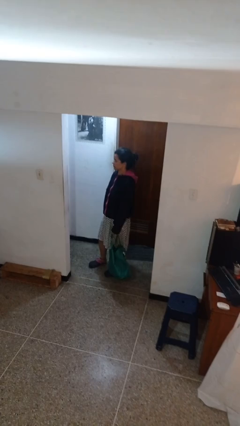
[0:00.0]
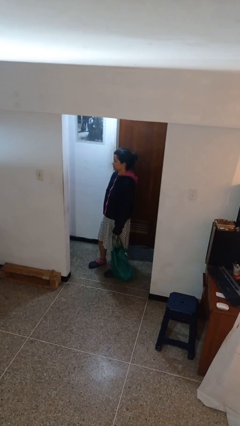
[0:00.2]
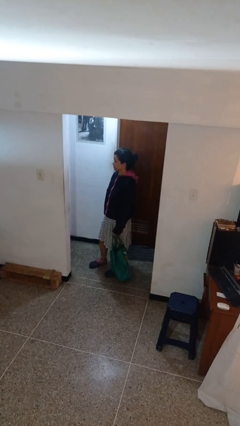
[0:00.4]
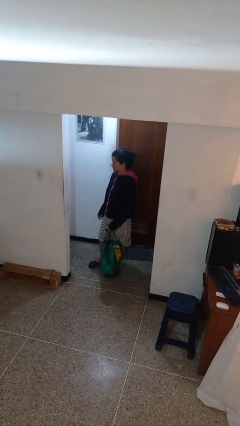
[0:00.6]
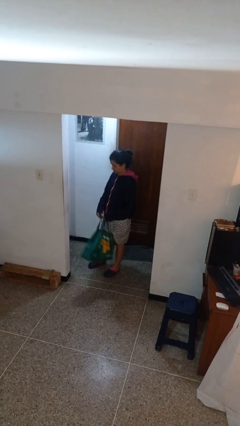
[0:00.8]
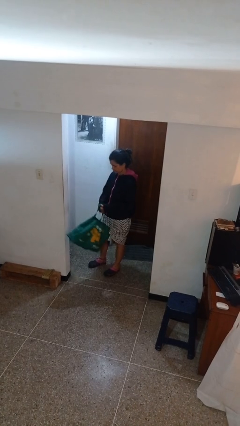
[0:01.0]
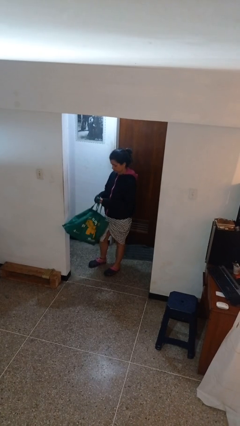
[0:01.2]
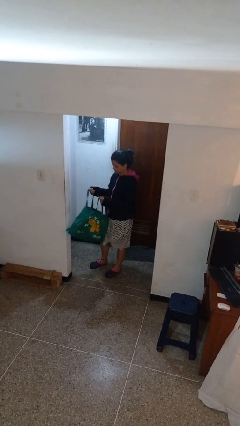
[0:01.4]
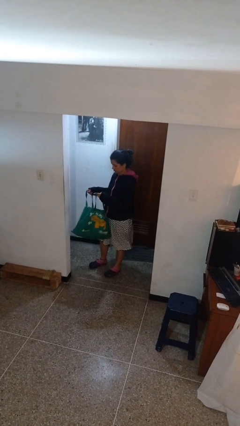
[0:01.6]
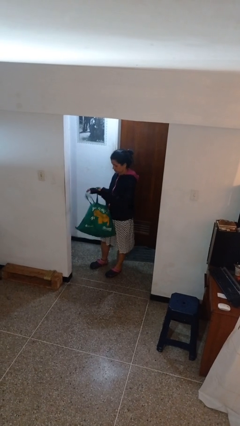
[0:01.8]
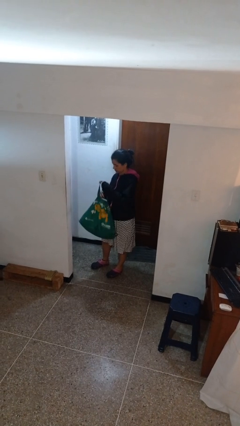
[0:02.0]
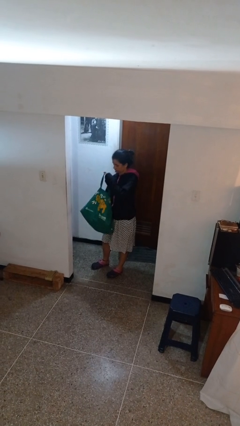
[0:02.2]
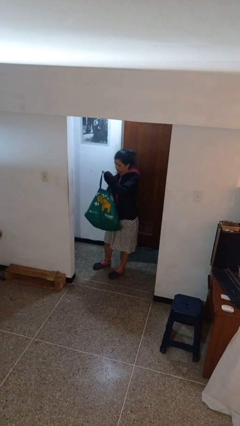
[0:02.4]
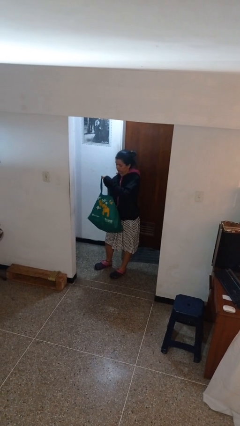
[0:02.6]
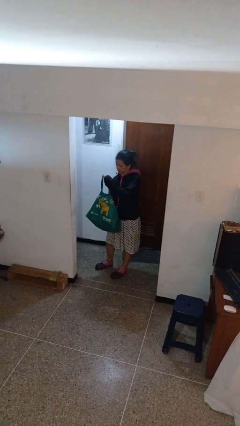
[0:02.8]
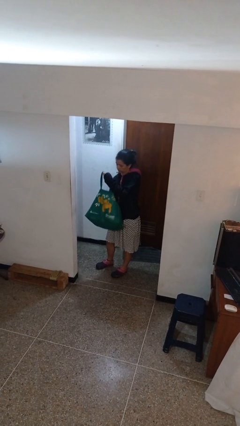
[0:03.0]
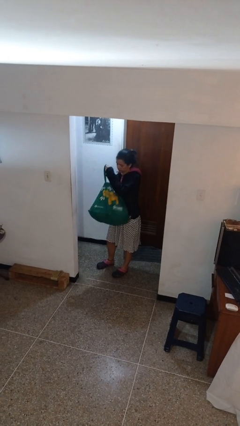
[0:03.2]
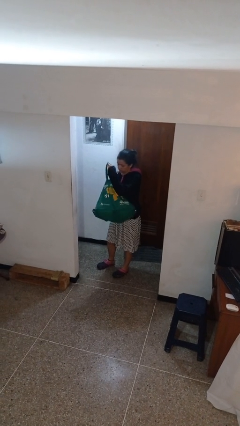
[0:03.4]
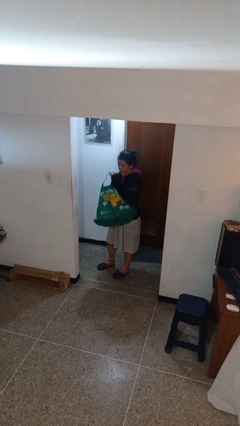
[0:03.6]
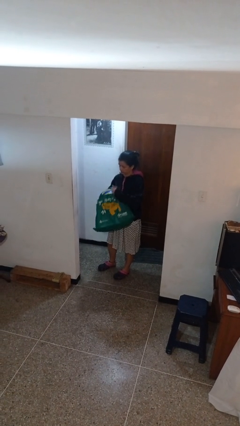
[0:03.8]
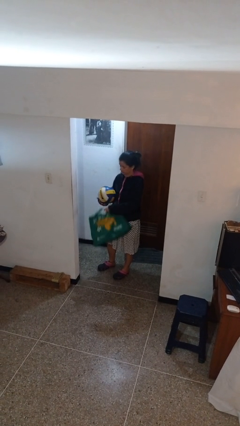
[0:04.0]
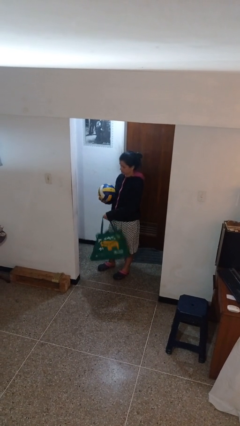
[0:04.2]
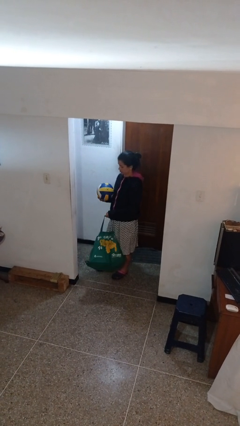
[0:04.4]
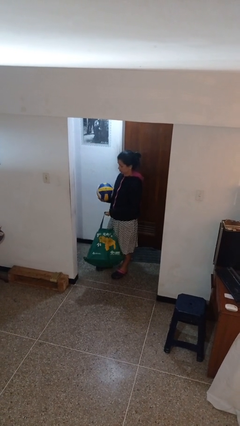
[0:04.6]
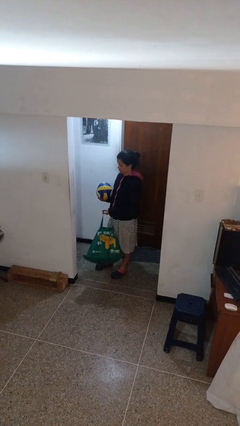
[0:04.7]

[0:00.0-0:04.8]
person takes object from bag

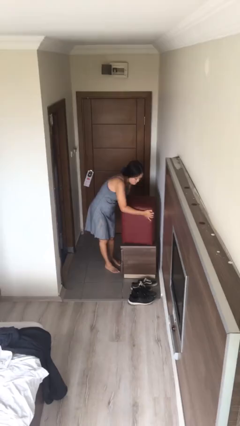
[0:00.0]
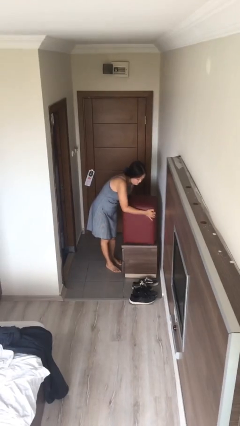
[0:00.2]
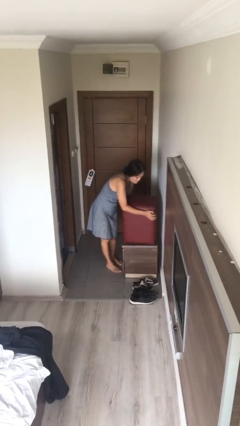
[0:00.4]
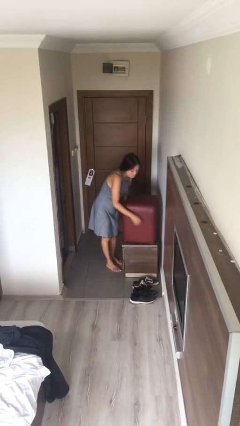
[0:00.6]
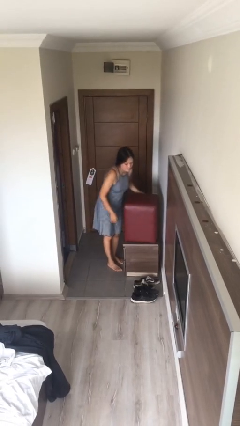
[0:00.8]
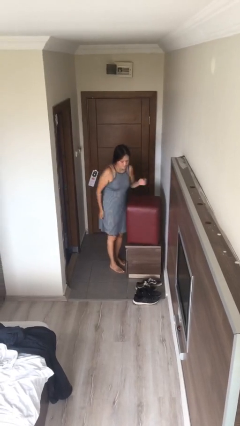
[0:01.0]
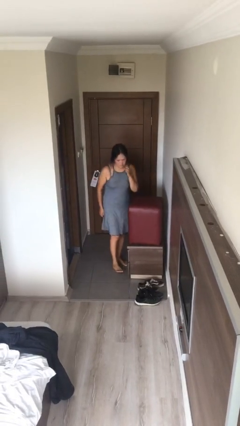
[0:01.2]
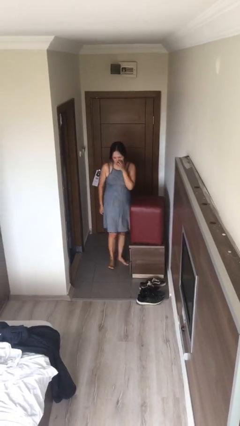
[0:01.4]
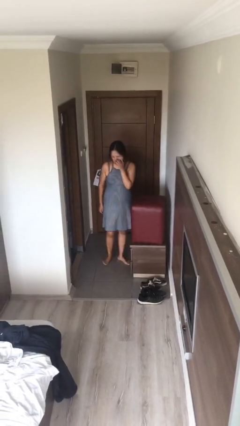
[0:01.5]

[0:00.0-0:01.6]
person puts down object on floor

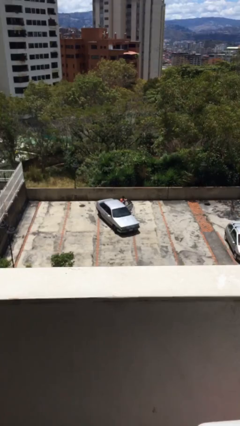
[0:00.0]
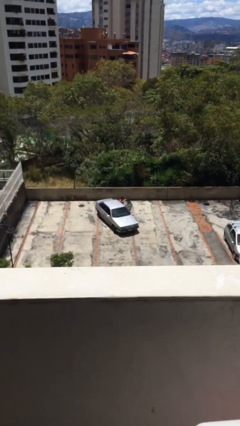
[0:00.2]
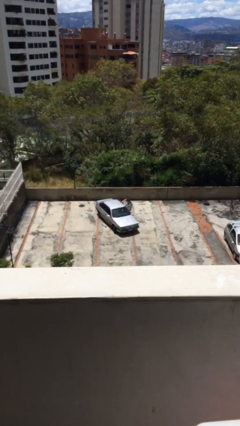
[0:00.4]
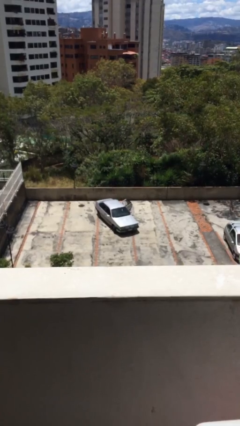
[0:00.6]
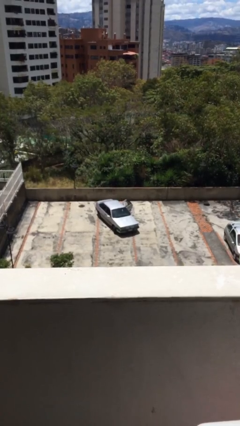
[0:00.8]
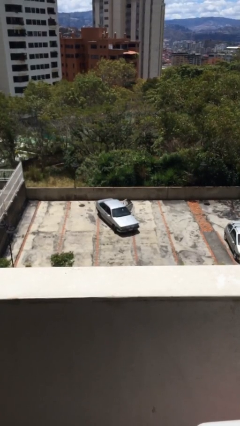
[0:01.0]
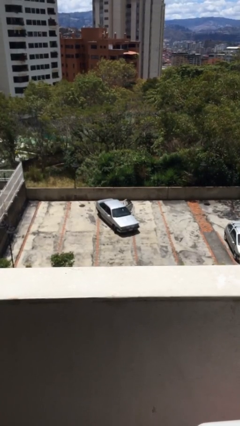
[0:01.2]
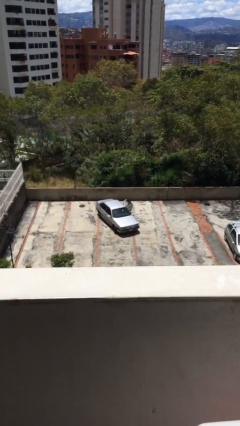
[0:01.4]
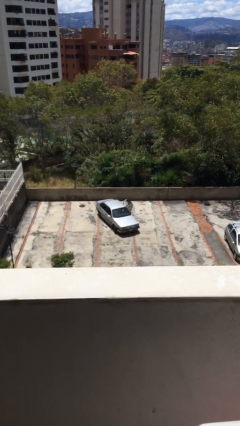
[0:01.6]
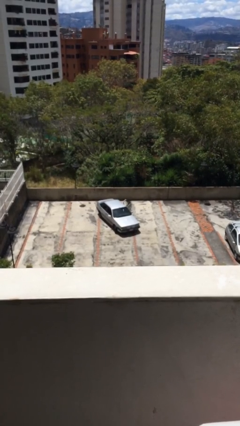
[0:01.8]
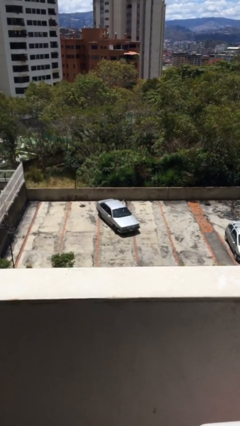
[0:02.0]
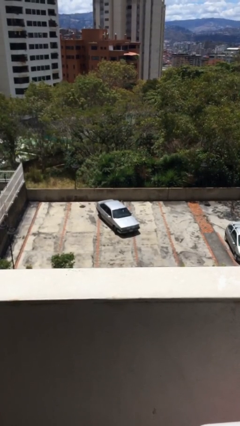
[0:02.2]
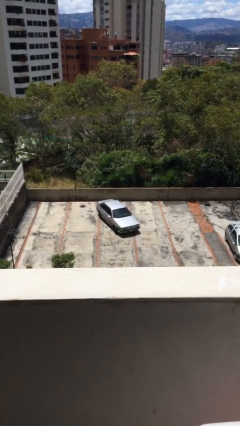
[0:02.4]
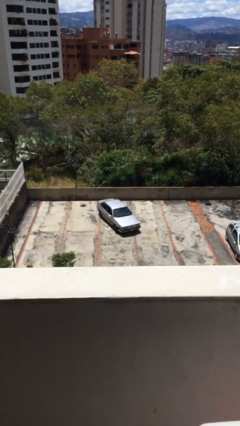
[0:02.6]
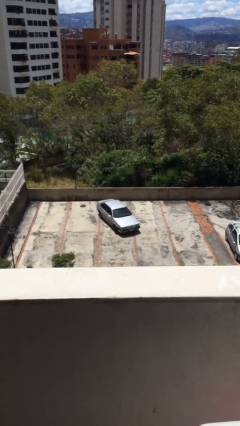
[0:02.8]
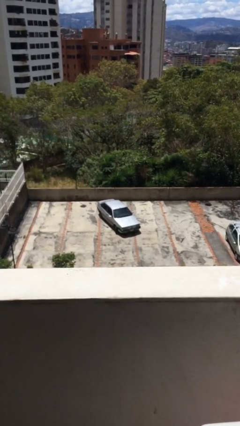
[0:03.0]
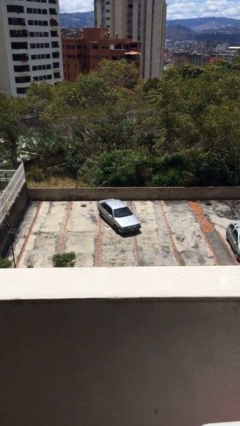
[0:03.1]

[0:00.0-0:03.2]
car picks up person

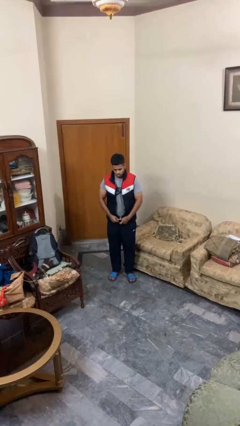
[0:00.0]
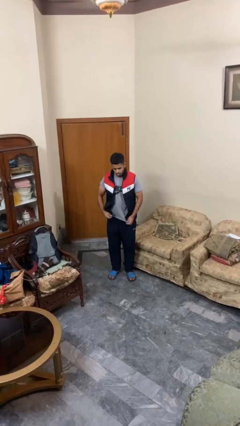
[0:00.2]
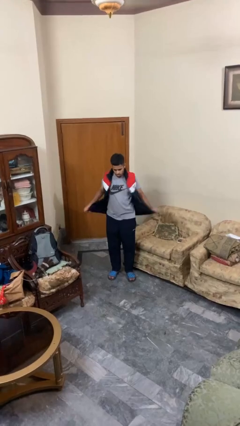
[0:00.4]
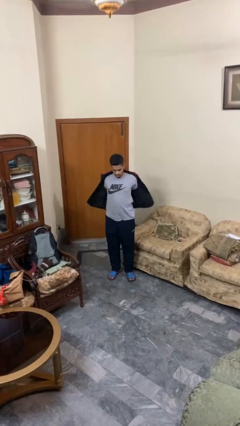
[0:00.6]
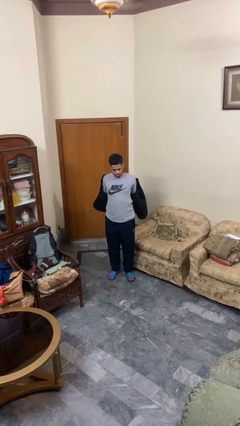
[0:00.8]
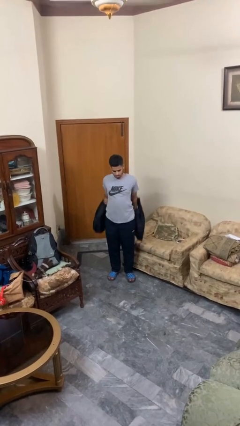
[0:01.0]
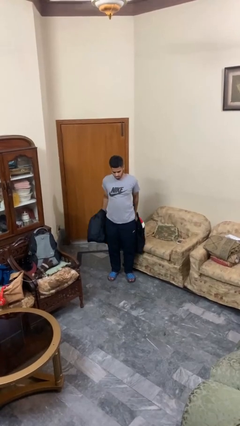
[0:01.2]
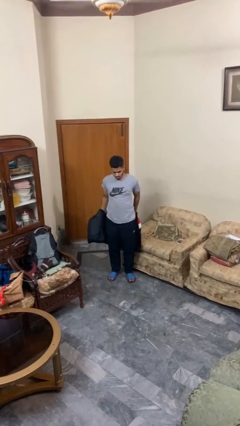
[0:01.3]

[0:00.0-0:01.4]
person takes off jacket

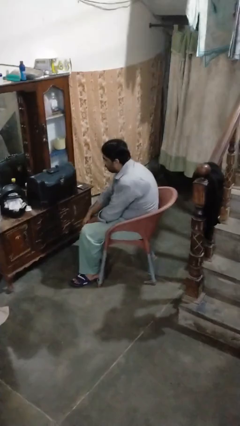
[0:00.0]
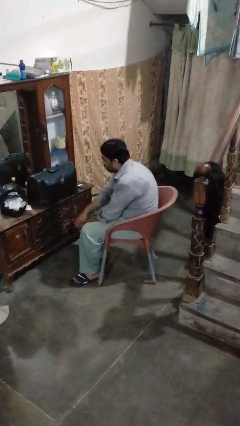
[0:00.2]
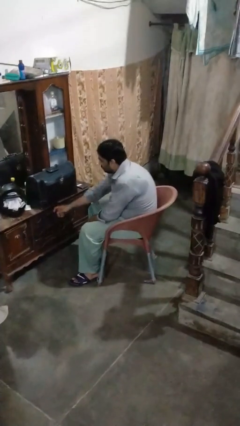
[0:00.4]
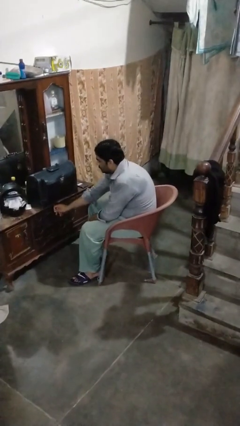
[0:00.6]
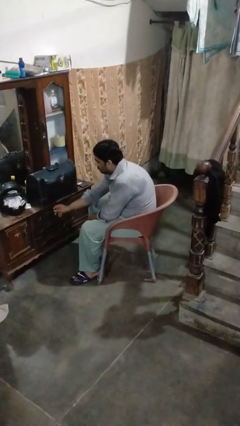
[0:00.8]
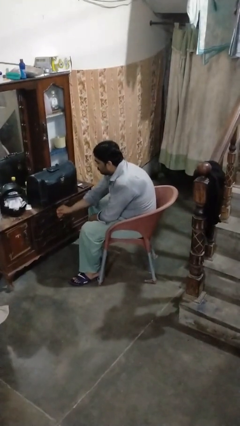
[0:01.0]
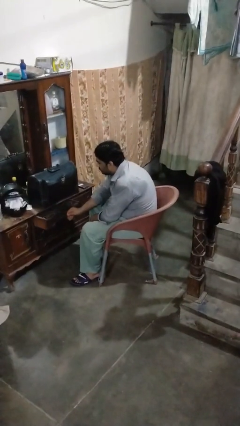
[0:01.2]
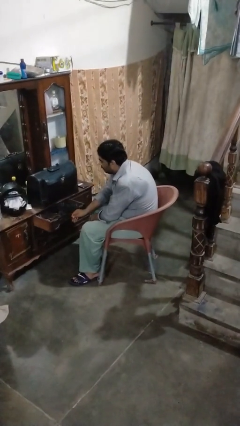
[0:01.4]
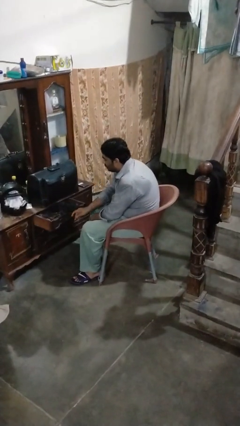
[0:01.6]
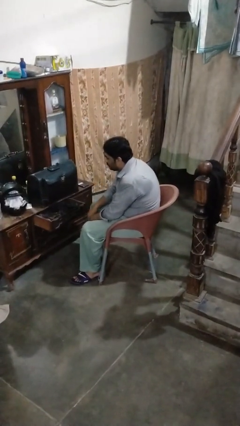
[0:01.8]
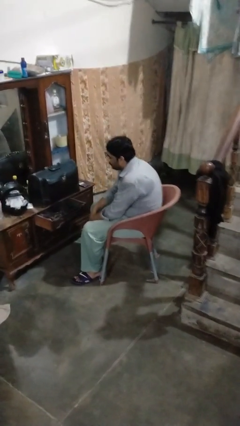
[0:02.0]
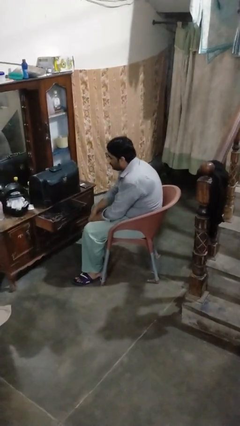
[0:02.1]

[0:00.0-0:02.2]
person opens dresser drawer

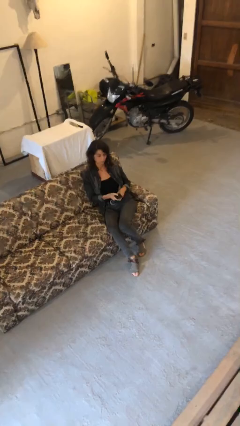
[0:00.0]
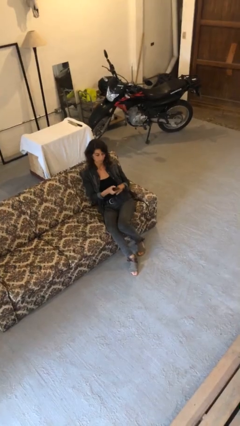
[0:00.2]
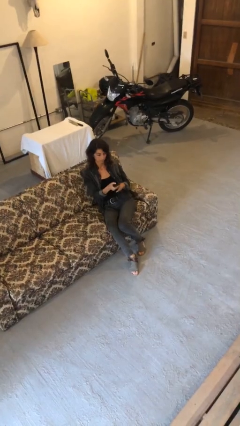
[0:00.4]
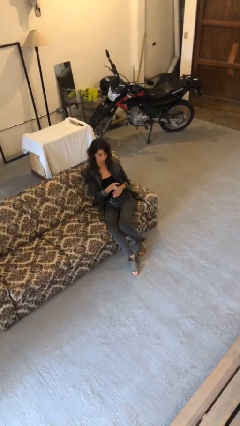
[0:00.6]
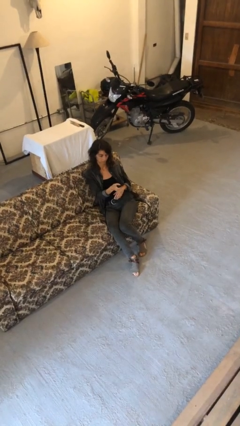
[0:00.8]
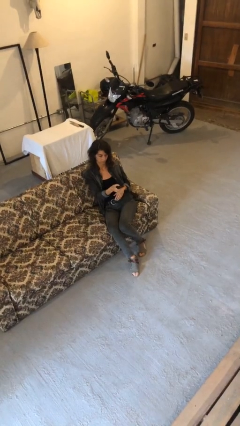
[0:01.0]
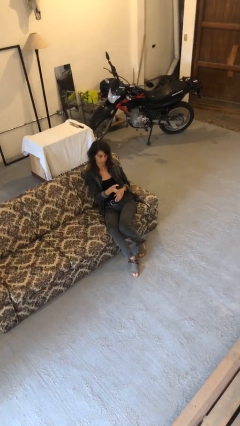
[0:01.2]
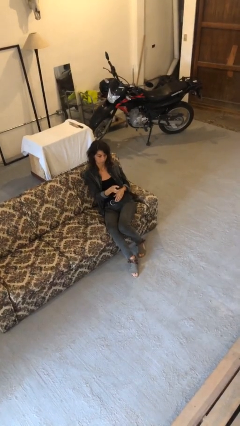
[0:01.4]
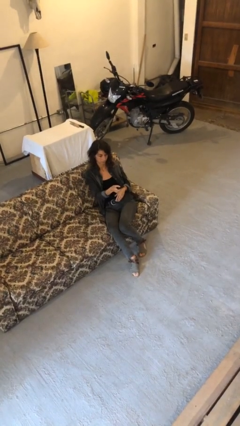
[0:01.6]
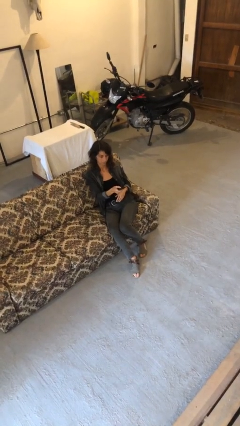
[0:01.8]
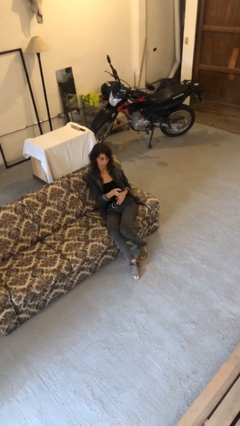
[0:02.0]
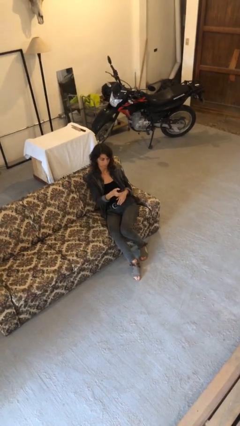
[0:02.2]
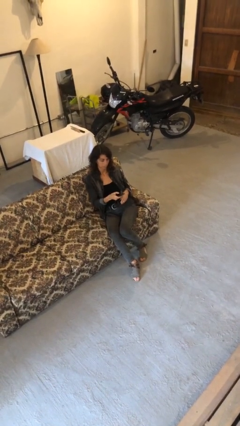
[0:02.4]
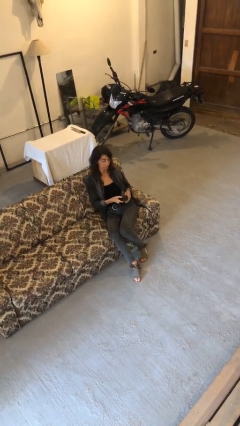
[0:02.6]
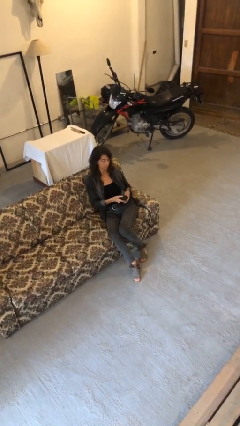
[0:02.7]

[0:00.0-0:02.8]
person uses television remote

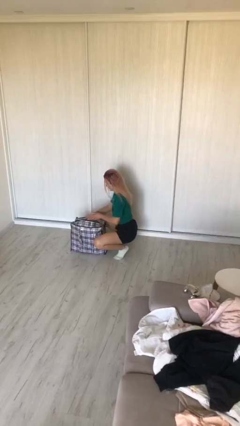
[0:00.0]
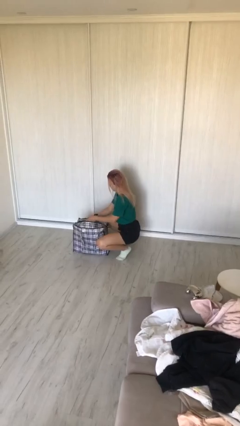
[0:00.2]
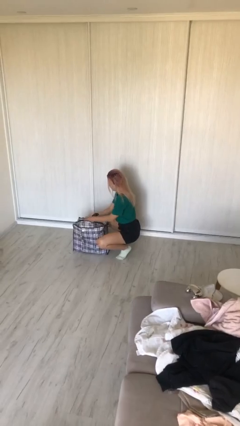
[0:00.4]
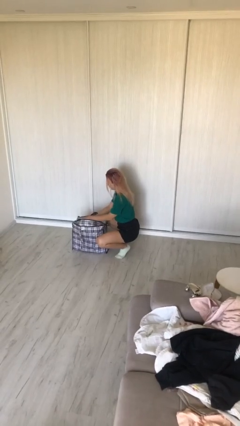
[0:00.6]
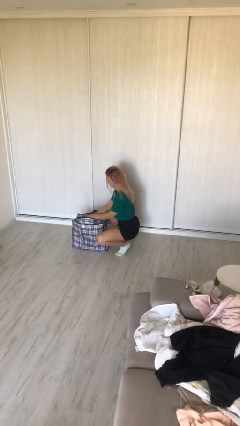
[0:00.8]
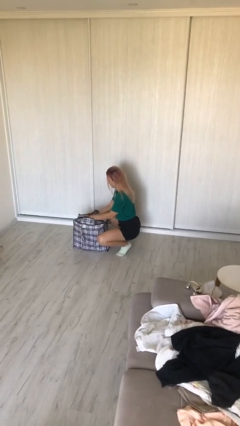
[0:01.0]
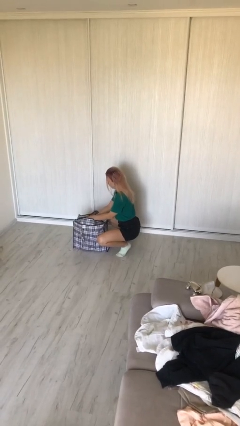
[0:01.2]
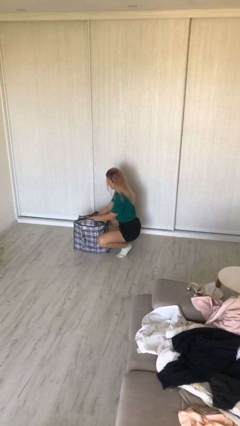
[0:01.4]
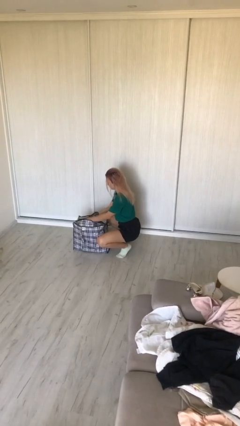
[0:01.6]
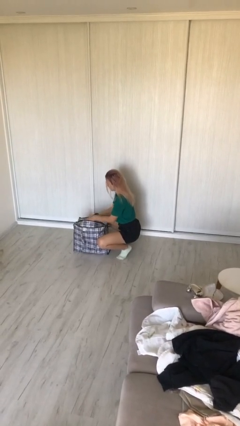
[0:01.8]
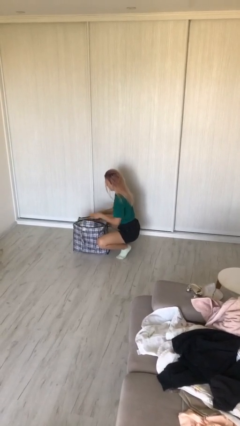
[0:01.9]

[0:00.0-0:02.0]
person searches in bag
